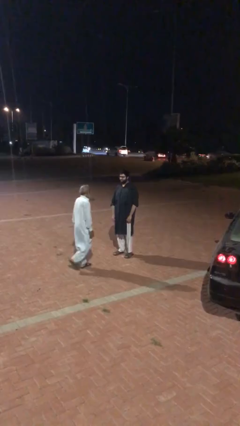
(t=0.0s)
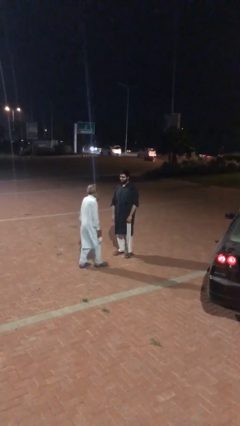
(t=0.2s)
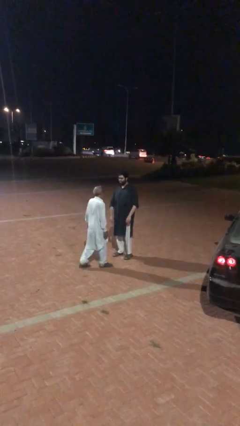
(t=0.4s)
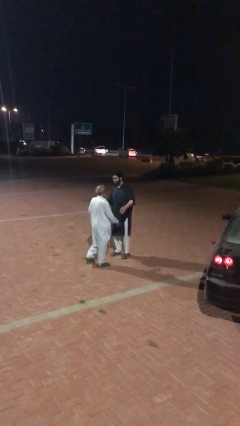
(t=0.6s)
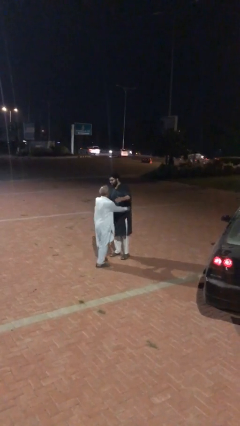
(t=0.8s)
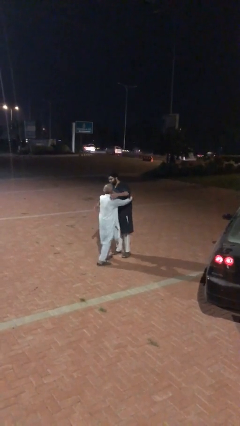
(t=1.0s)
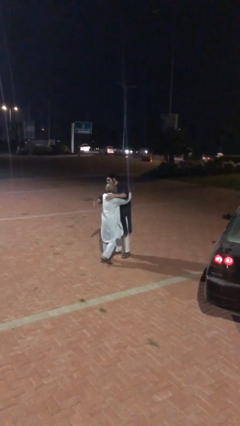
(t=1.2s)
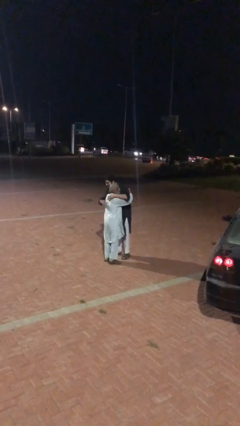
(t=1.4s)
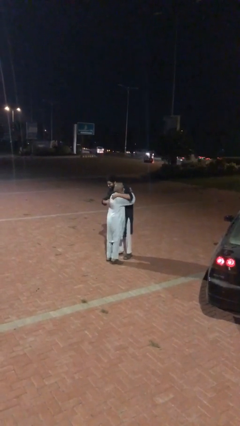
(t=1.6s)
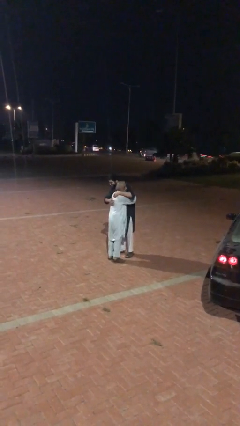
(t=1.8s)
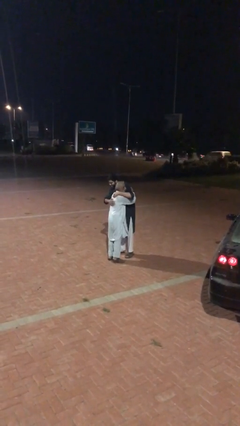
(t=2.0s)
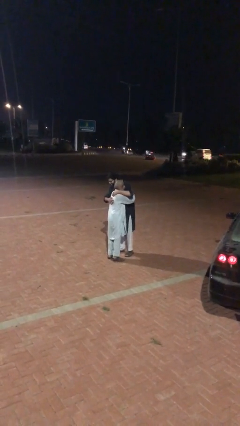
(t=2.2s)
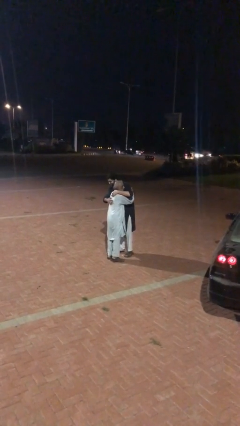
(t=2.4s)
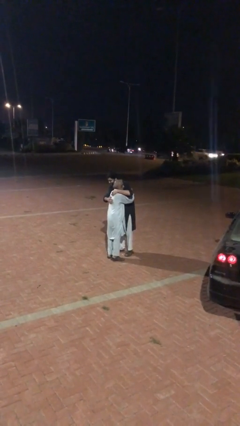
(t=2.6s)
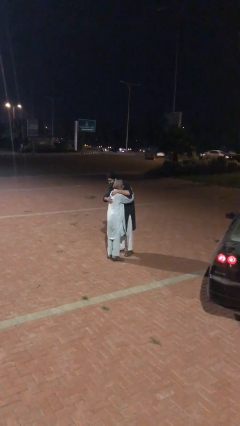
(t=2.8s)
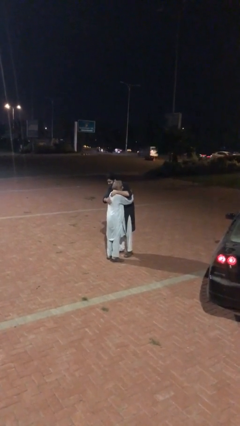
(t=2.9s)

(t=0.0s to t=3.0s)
person embraces person

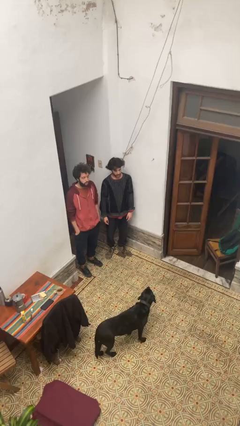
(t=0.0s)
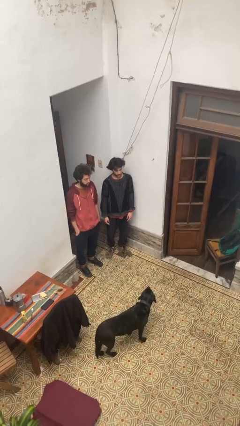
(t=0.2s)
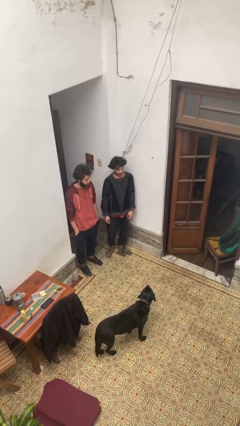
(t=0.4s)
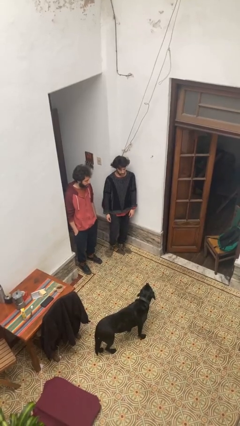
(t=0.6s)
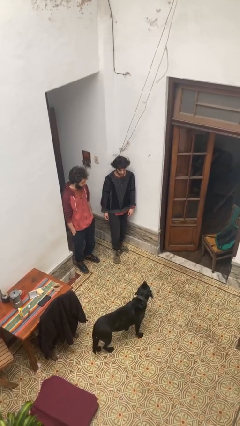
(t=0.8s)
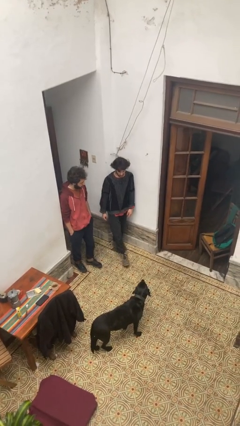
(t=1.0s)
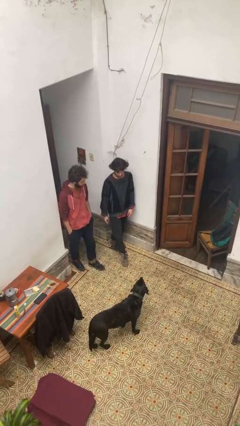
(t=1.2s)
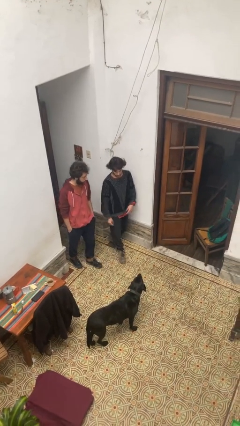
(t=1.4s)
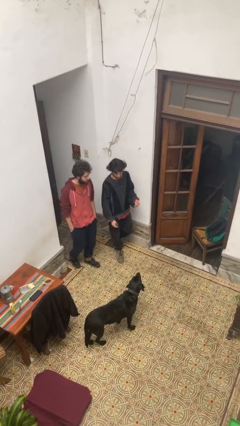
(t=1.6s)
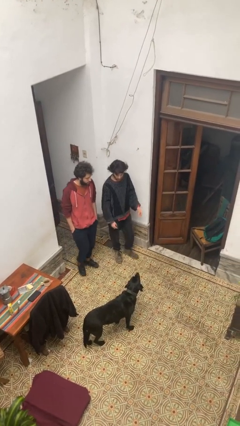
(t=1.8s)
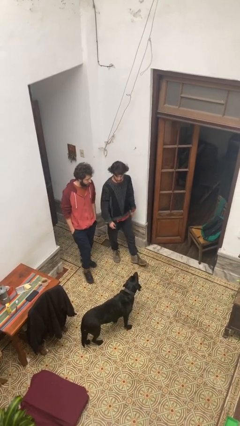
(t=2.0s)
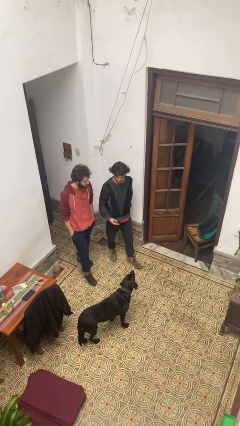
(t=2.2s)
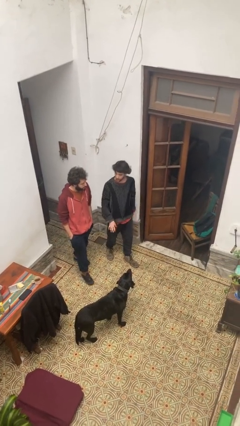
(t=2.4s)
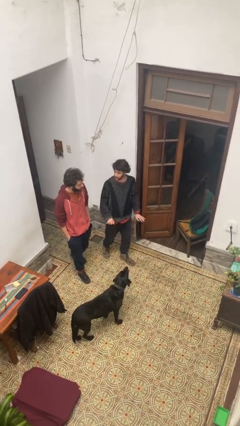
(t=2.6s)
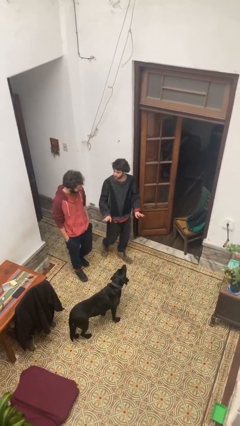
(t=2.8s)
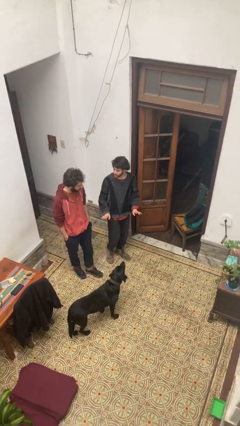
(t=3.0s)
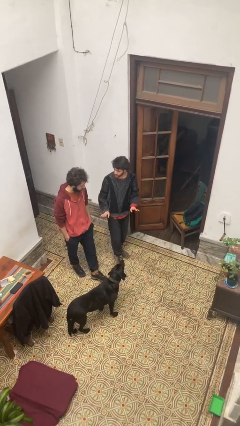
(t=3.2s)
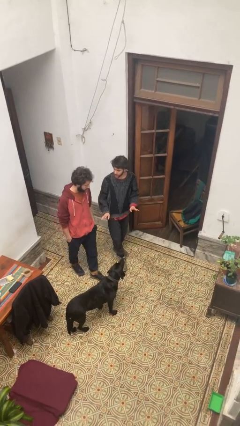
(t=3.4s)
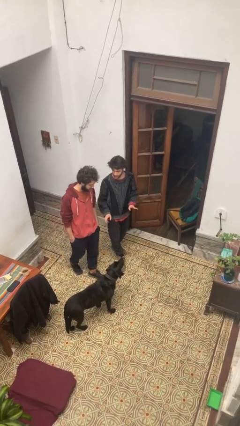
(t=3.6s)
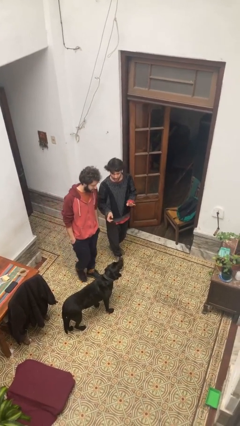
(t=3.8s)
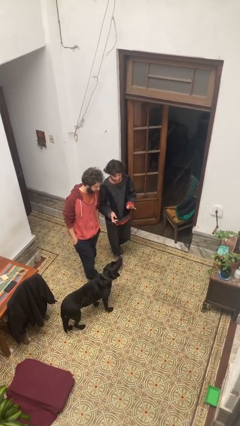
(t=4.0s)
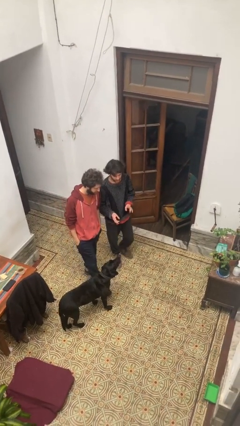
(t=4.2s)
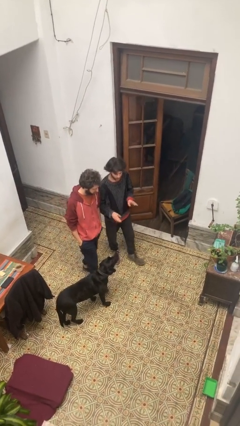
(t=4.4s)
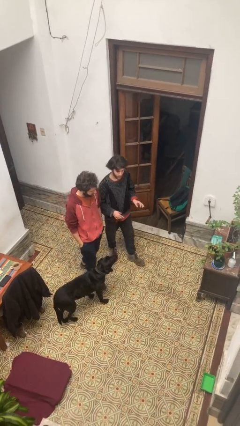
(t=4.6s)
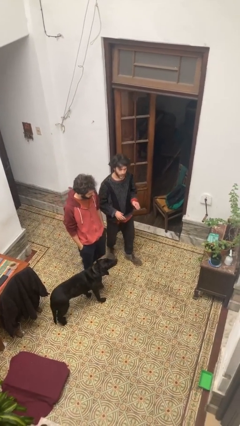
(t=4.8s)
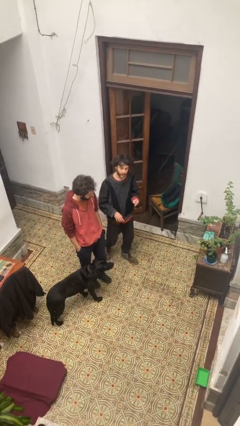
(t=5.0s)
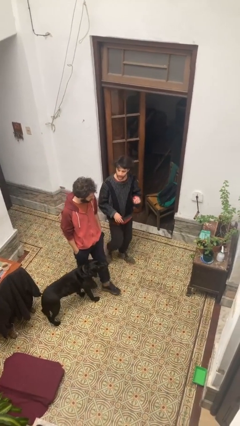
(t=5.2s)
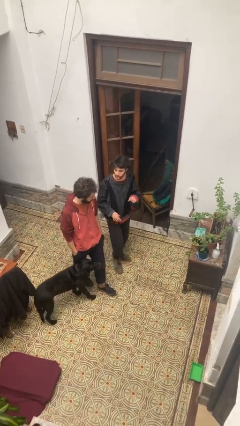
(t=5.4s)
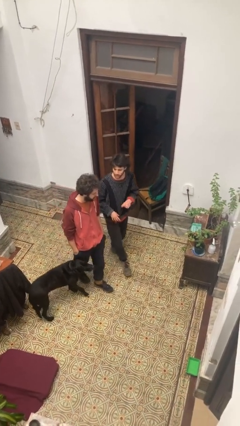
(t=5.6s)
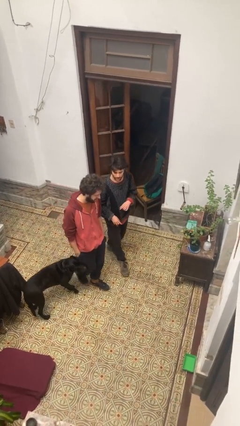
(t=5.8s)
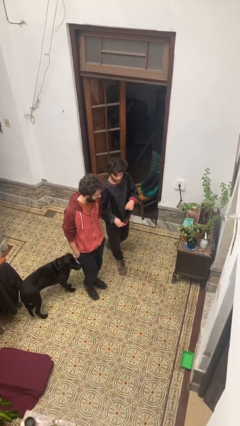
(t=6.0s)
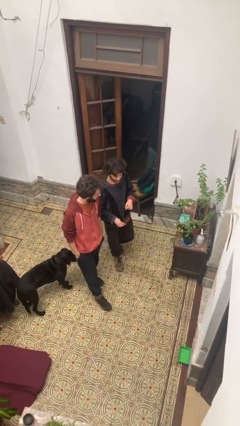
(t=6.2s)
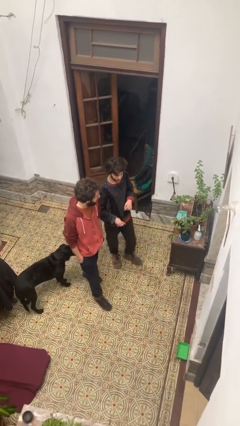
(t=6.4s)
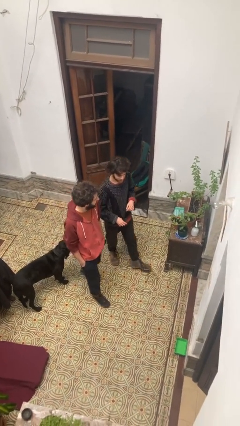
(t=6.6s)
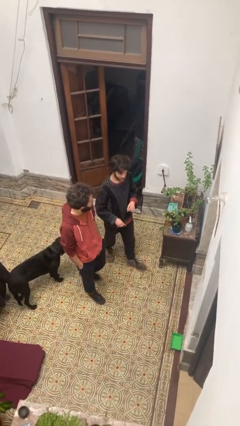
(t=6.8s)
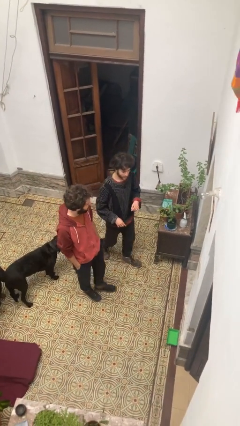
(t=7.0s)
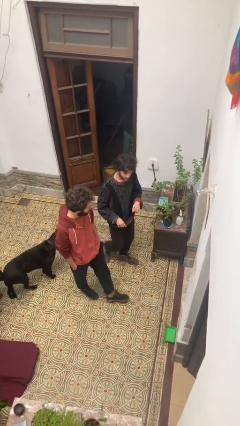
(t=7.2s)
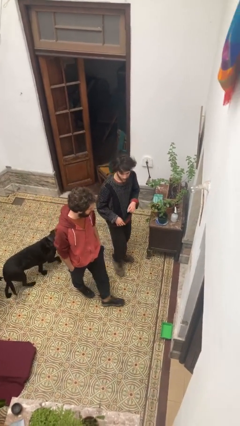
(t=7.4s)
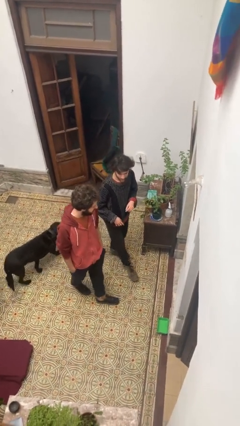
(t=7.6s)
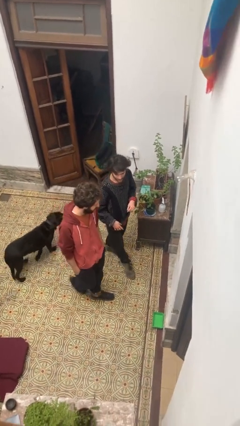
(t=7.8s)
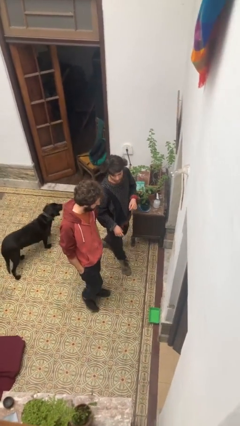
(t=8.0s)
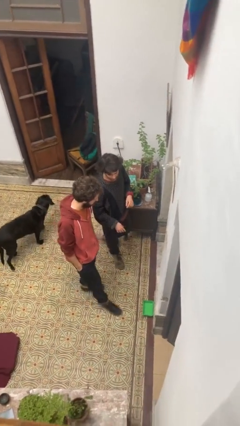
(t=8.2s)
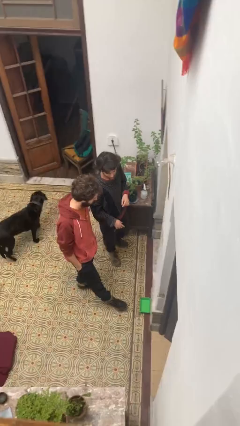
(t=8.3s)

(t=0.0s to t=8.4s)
person talks to person

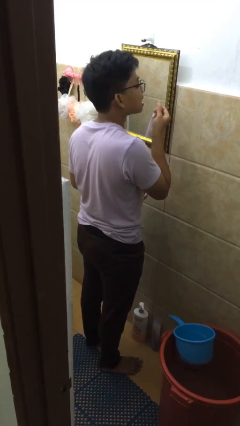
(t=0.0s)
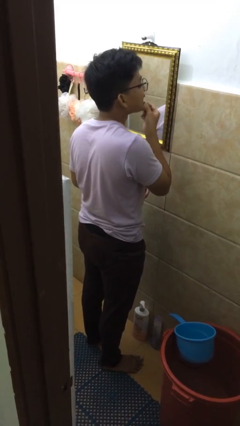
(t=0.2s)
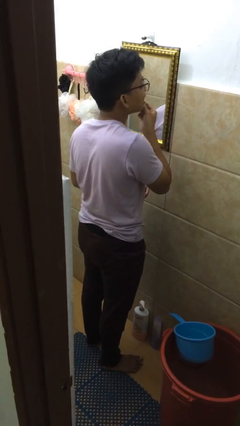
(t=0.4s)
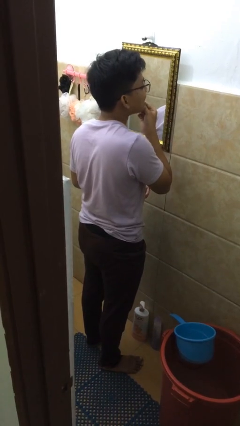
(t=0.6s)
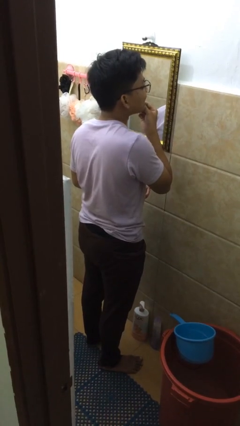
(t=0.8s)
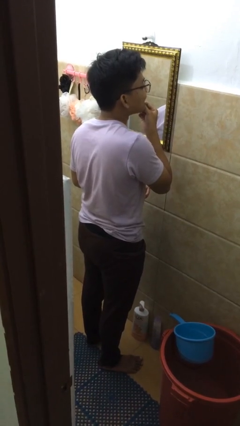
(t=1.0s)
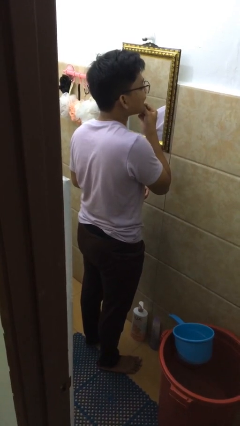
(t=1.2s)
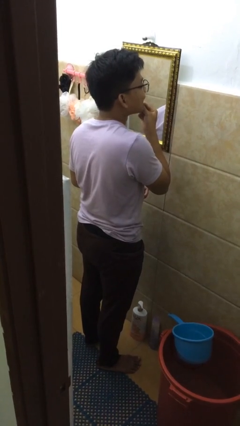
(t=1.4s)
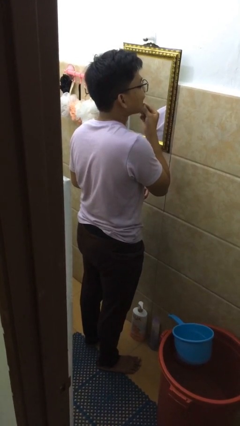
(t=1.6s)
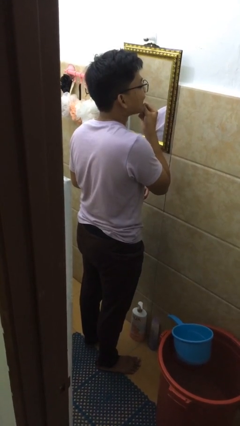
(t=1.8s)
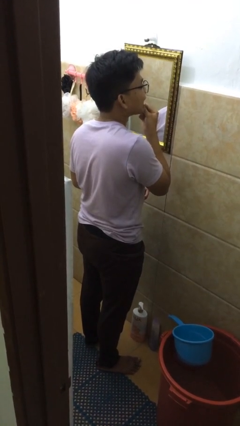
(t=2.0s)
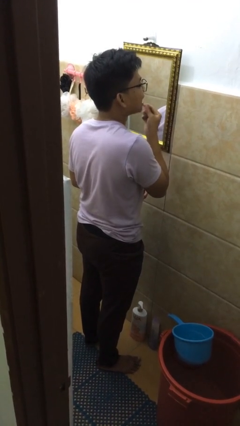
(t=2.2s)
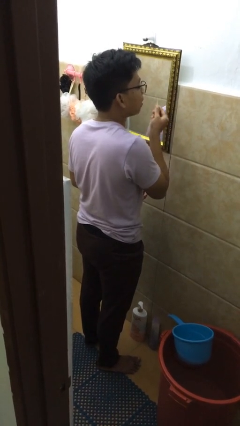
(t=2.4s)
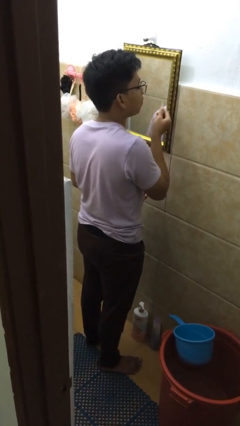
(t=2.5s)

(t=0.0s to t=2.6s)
person flosses

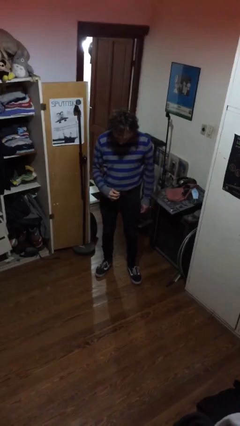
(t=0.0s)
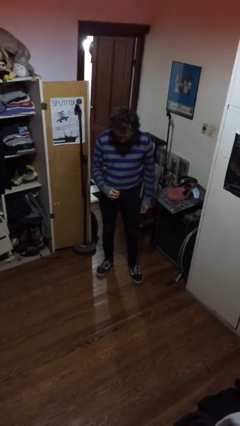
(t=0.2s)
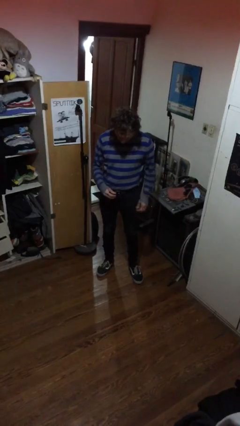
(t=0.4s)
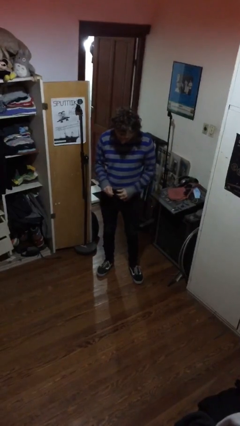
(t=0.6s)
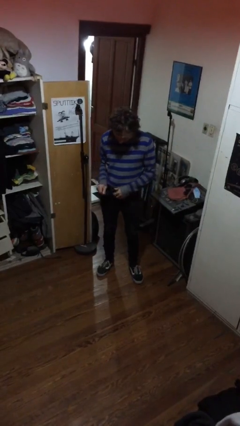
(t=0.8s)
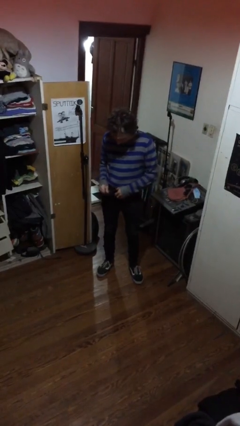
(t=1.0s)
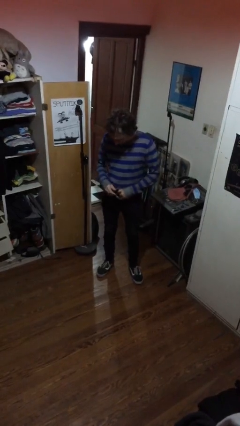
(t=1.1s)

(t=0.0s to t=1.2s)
person takes off belt

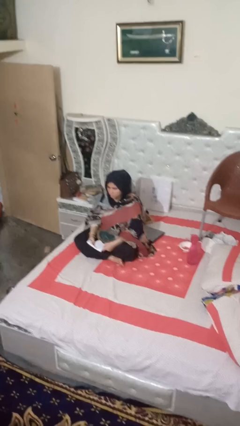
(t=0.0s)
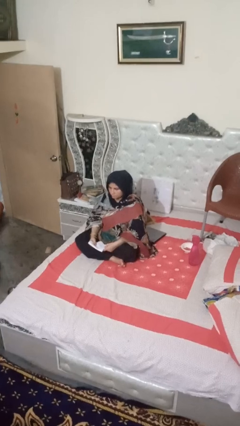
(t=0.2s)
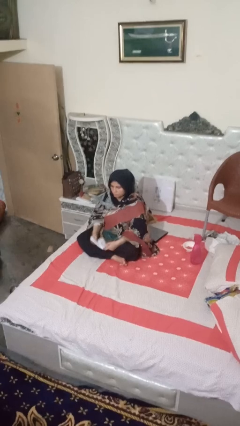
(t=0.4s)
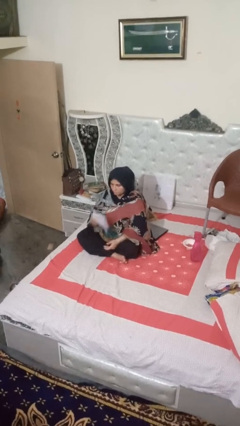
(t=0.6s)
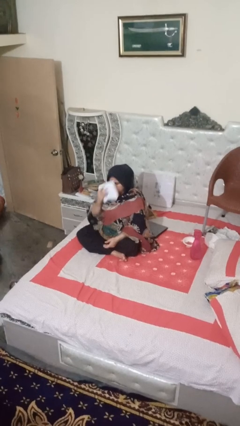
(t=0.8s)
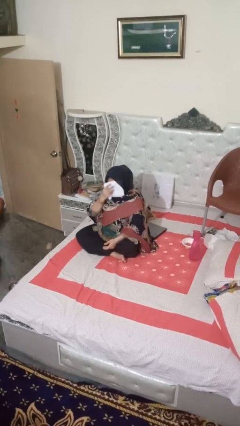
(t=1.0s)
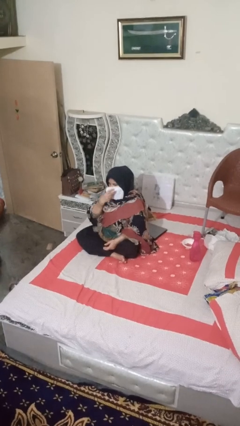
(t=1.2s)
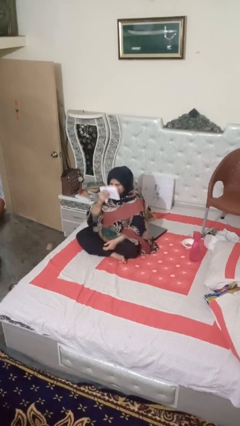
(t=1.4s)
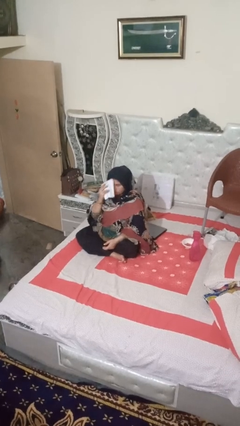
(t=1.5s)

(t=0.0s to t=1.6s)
person wipes mouth with napkin

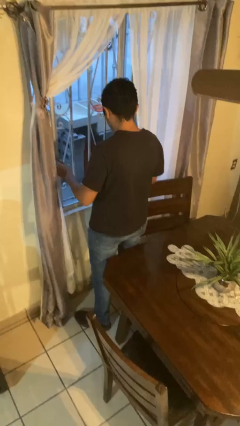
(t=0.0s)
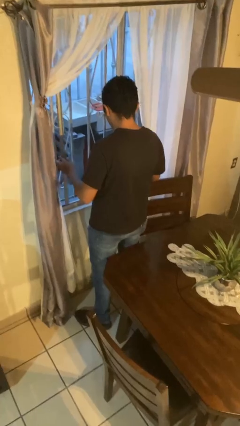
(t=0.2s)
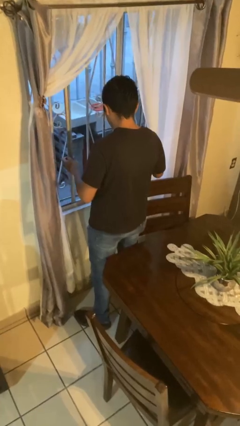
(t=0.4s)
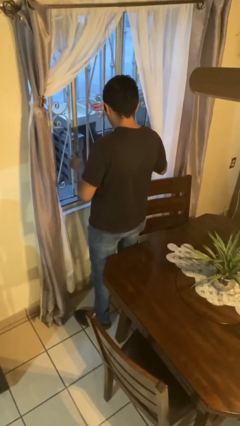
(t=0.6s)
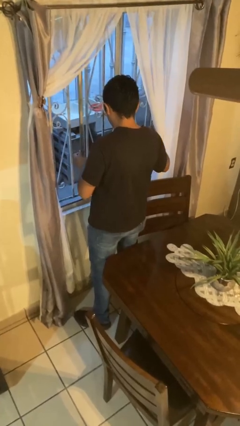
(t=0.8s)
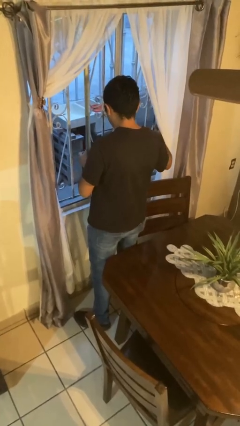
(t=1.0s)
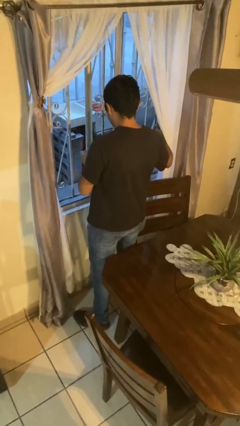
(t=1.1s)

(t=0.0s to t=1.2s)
person opens home window
